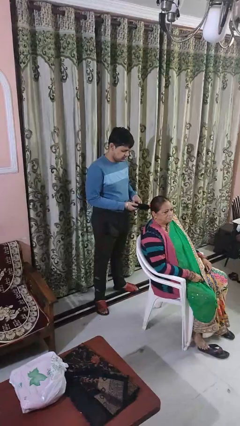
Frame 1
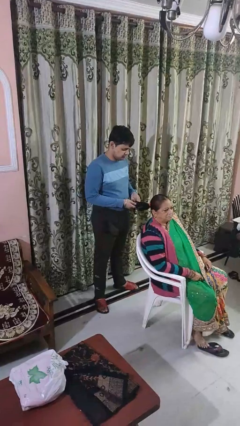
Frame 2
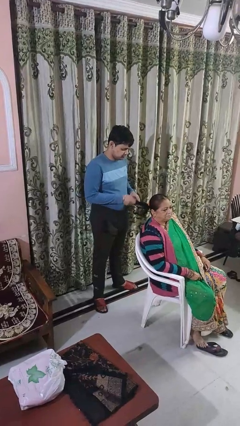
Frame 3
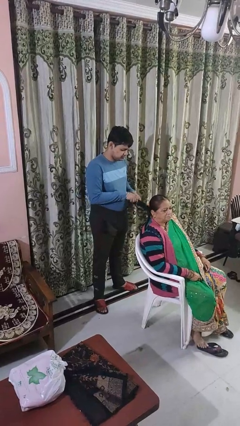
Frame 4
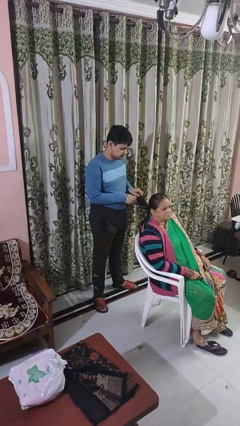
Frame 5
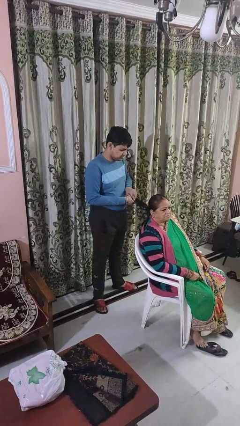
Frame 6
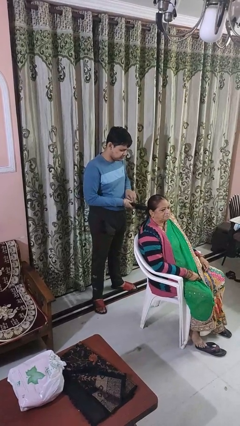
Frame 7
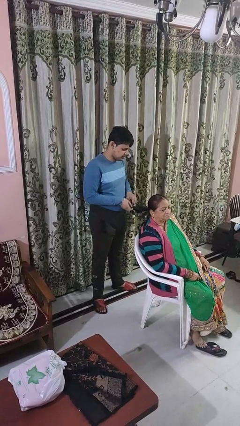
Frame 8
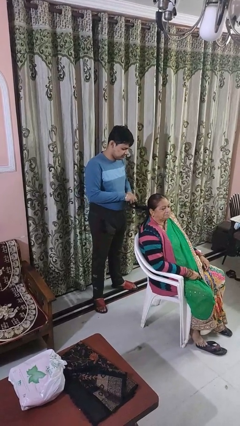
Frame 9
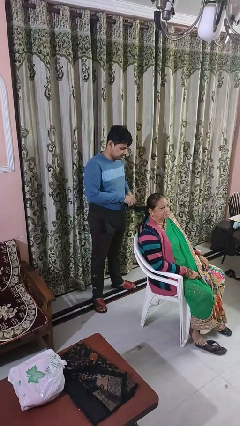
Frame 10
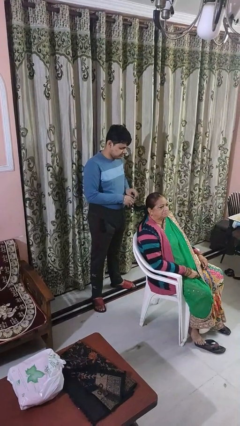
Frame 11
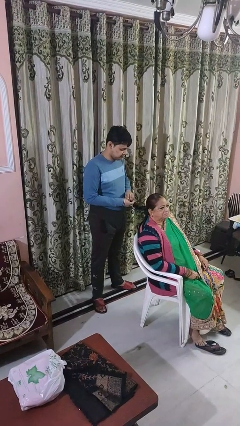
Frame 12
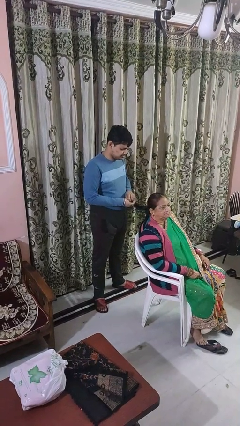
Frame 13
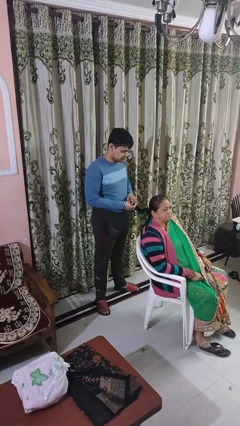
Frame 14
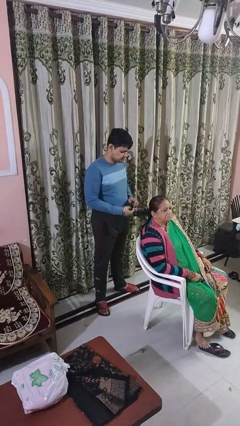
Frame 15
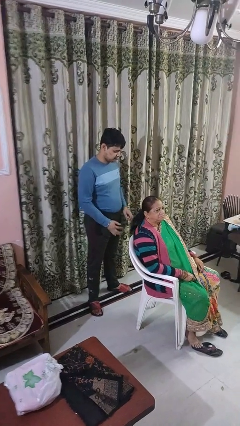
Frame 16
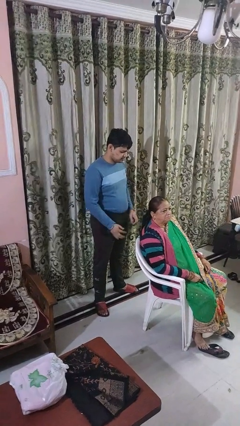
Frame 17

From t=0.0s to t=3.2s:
person braids hair of person

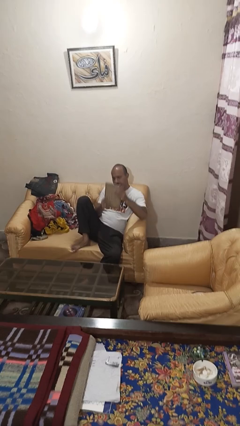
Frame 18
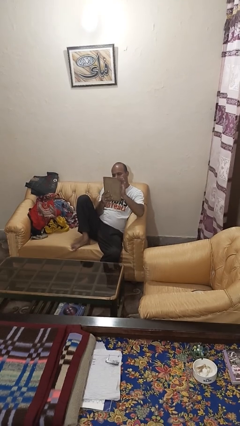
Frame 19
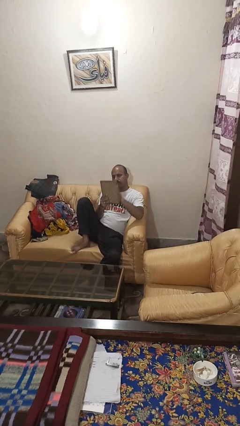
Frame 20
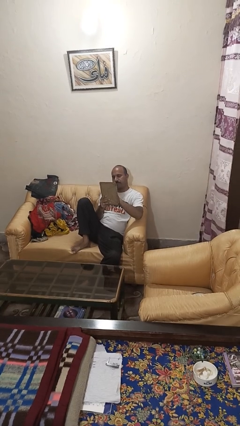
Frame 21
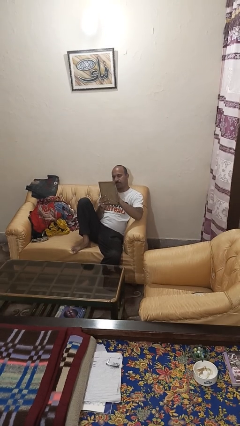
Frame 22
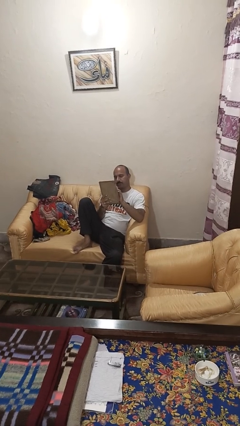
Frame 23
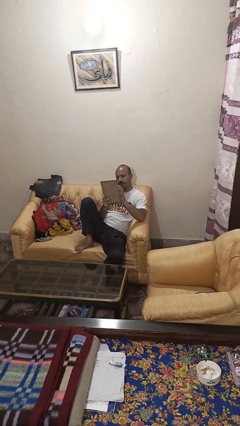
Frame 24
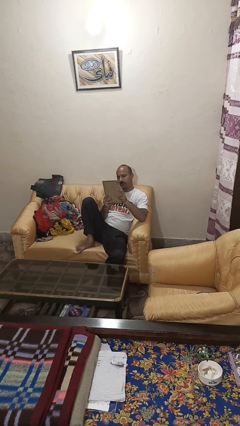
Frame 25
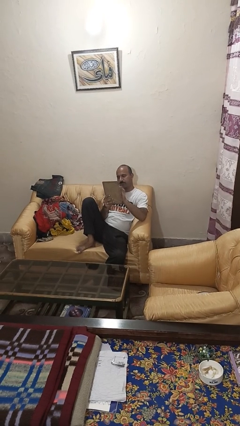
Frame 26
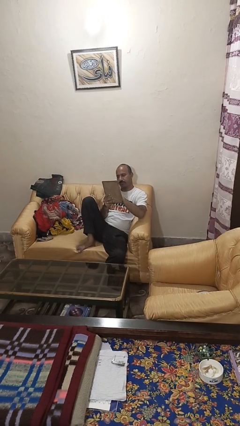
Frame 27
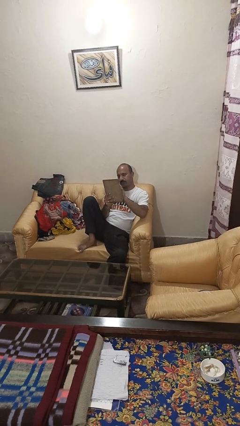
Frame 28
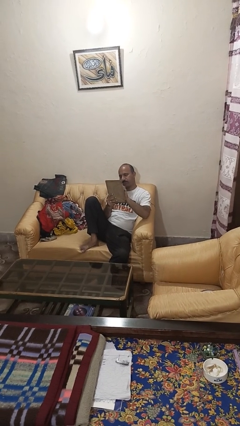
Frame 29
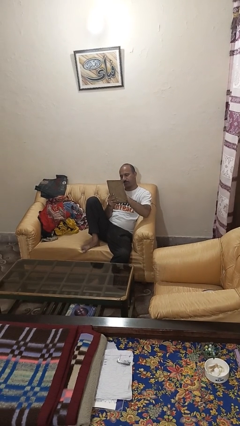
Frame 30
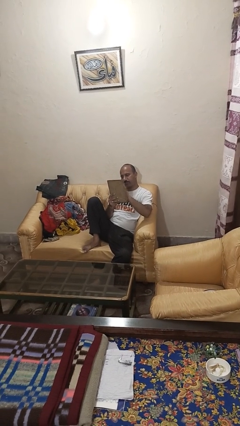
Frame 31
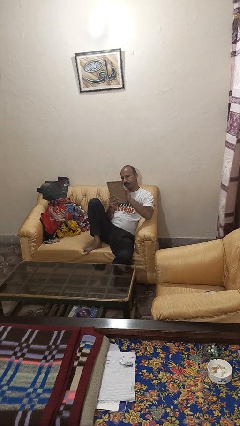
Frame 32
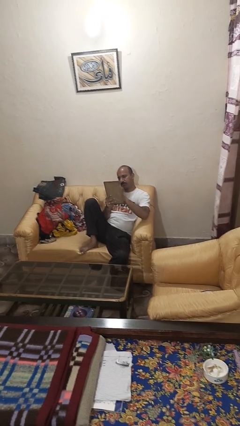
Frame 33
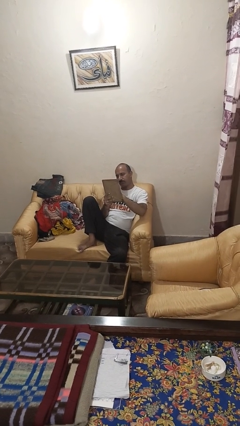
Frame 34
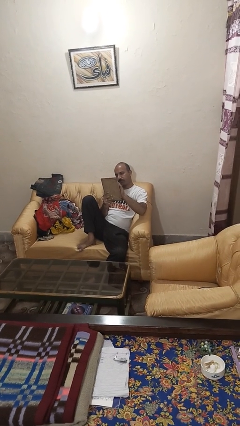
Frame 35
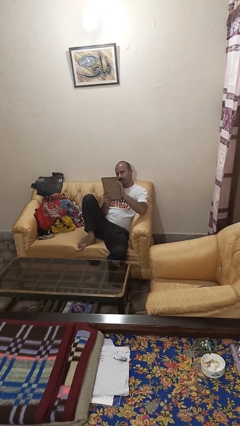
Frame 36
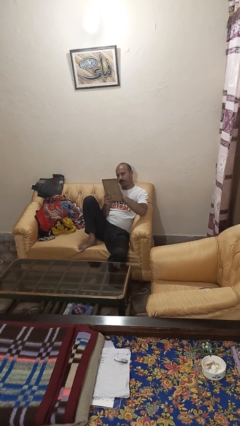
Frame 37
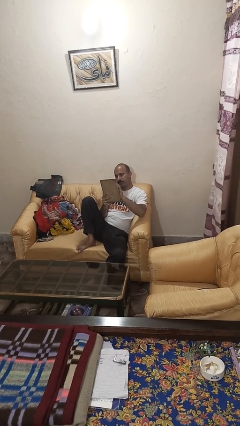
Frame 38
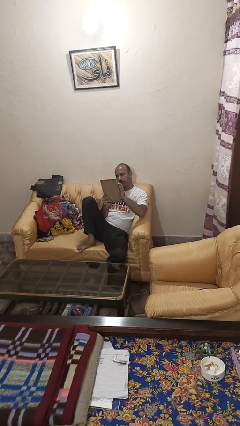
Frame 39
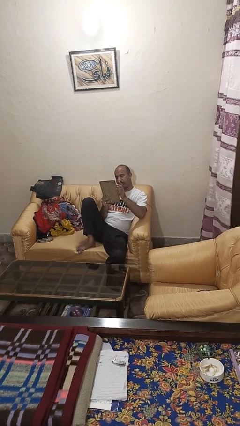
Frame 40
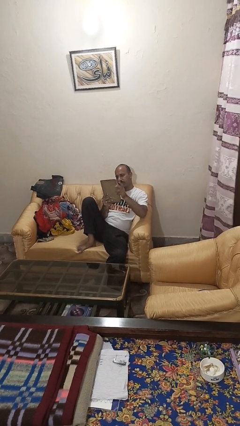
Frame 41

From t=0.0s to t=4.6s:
person interacts with tablet

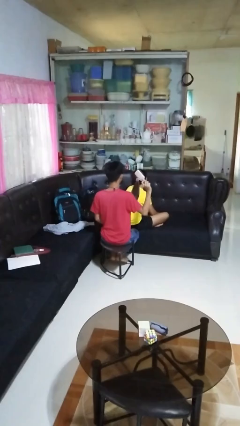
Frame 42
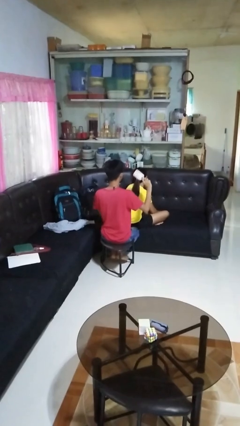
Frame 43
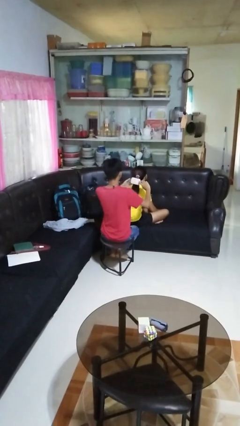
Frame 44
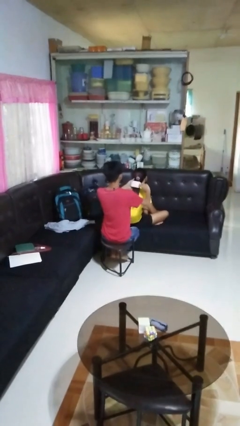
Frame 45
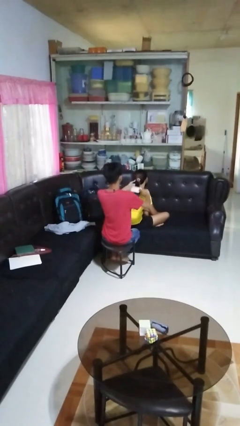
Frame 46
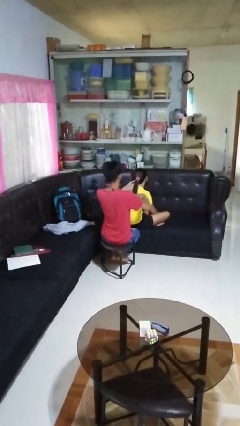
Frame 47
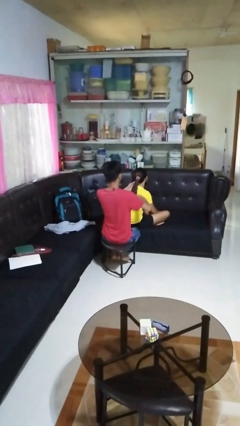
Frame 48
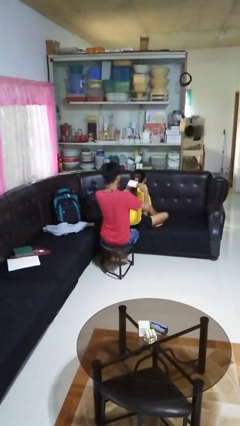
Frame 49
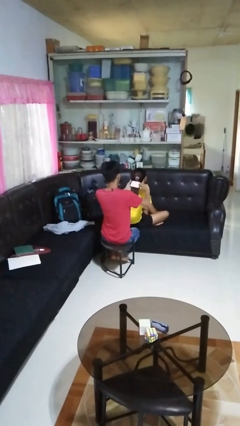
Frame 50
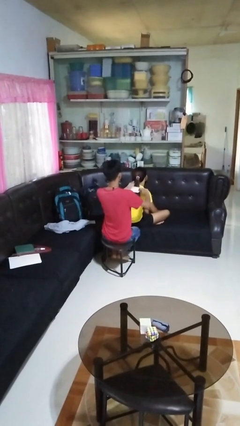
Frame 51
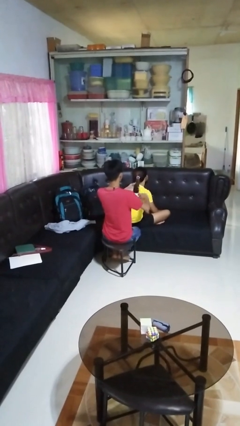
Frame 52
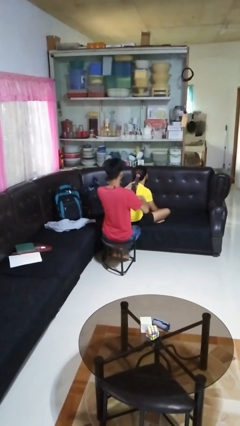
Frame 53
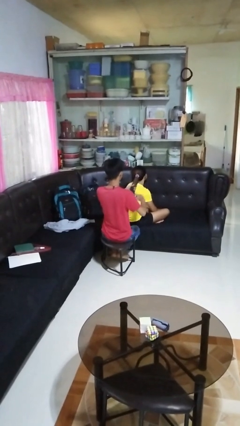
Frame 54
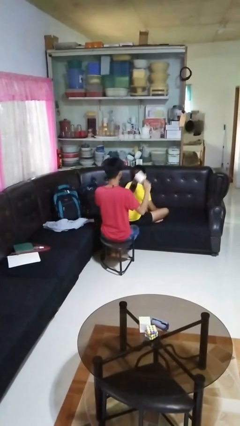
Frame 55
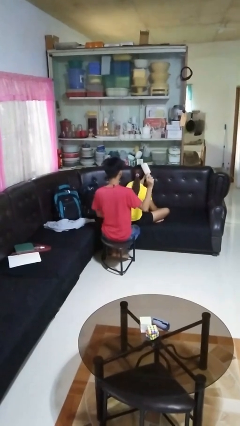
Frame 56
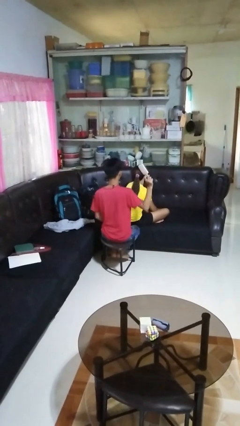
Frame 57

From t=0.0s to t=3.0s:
person brushes hair of person

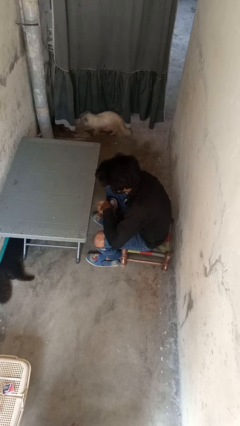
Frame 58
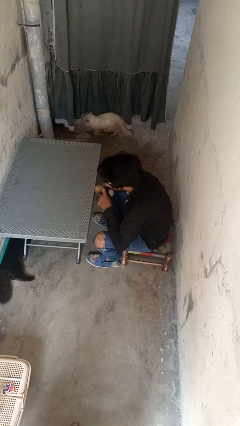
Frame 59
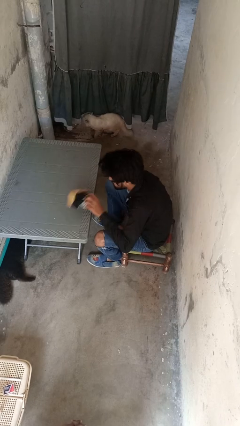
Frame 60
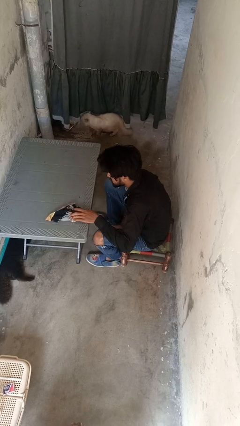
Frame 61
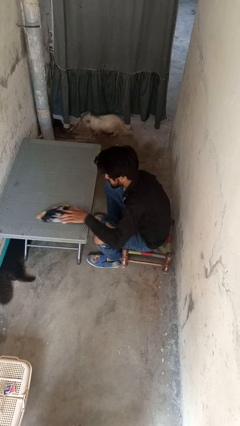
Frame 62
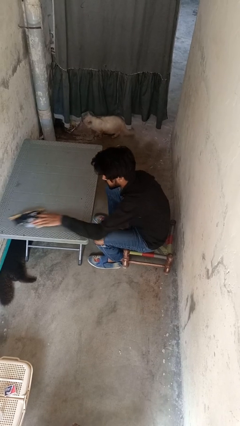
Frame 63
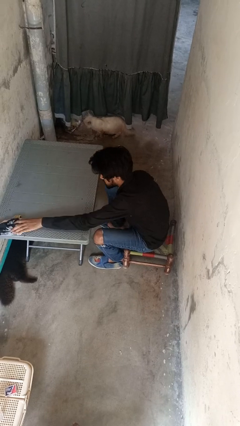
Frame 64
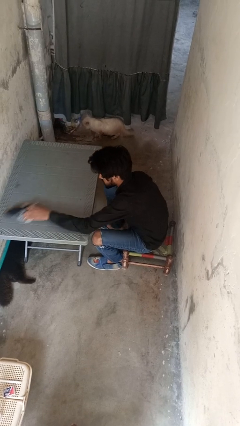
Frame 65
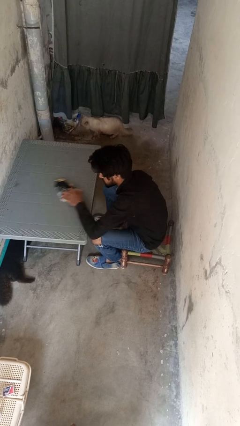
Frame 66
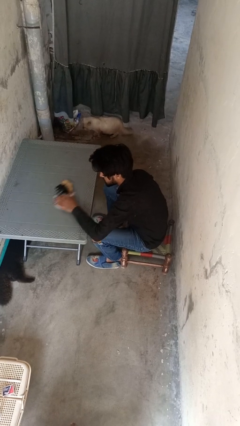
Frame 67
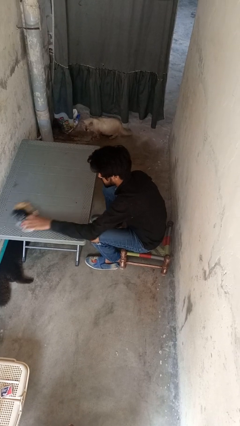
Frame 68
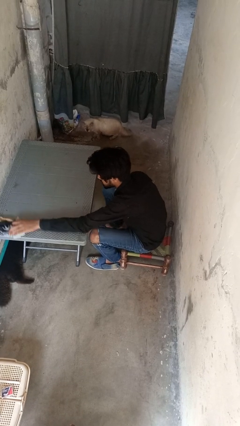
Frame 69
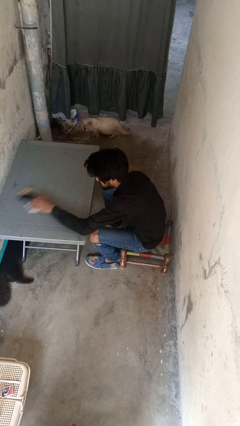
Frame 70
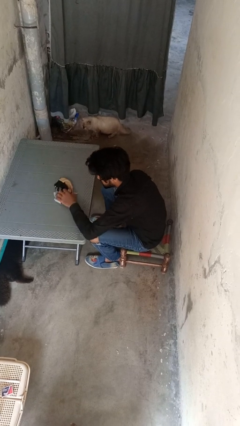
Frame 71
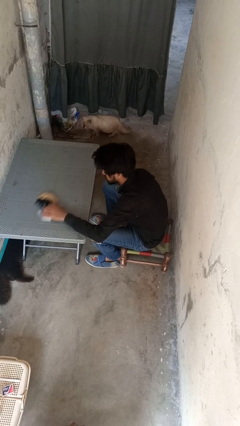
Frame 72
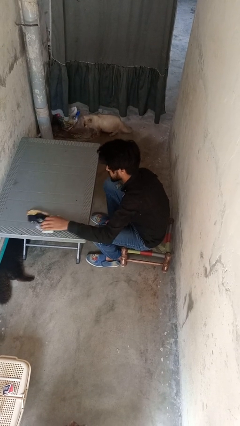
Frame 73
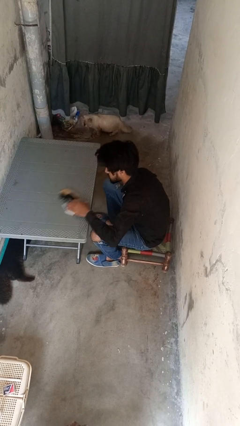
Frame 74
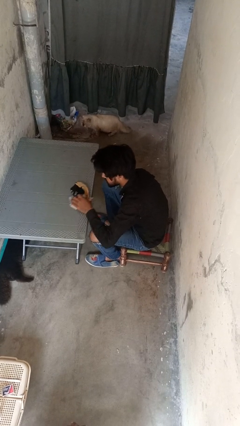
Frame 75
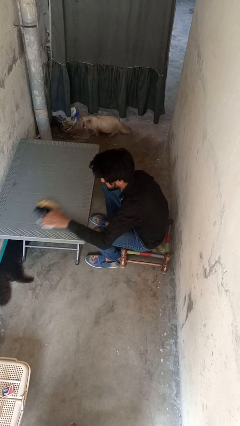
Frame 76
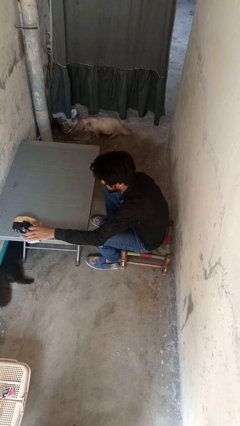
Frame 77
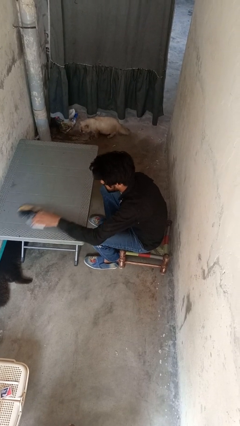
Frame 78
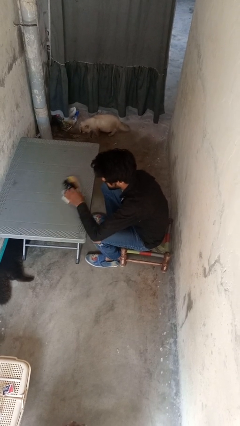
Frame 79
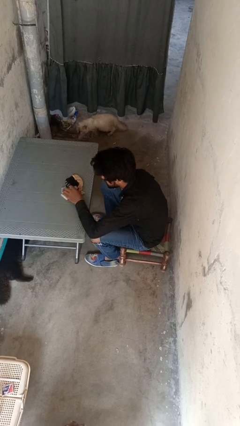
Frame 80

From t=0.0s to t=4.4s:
person cleans table with rag

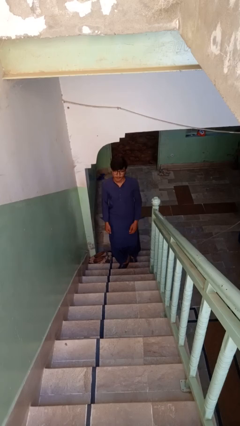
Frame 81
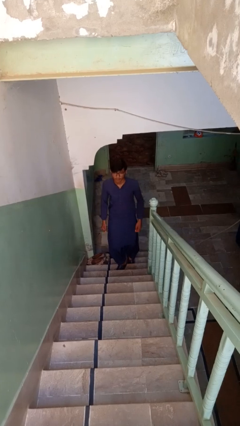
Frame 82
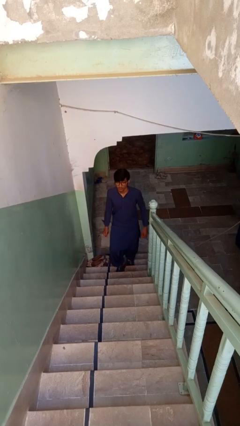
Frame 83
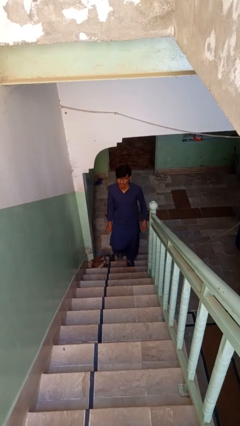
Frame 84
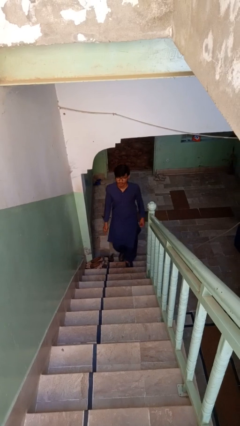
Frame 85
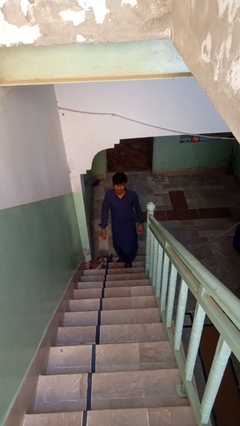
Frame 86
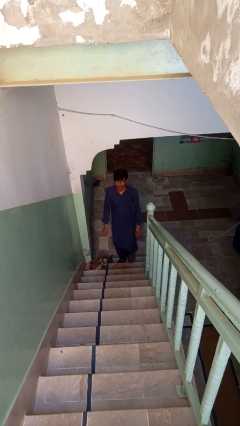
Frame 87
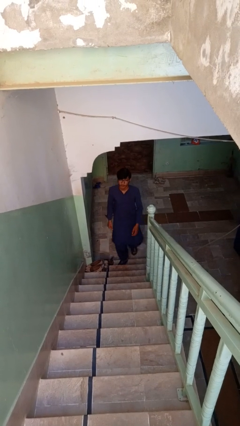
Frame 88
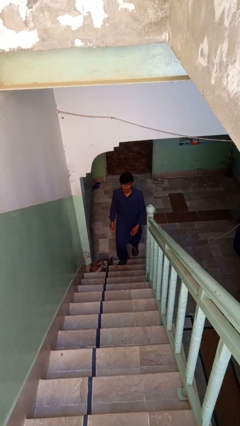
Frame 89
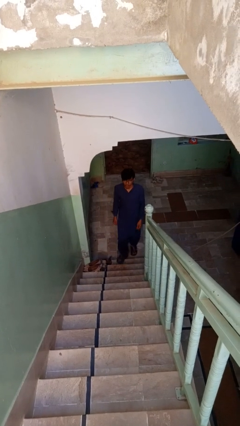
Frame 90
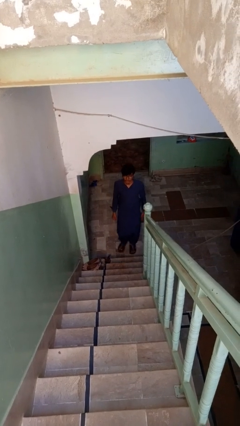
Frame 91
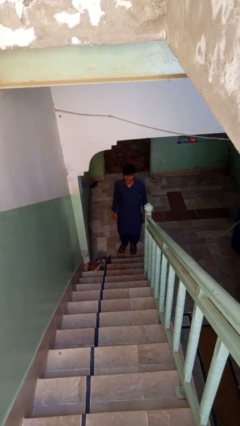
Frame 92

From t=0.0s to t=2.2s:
person climbs down stairs
